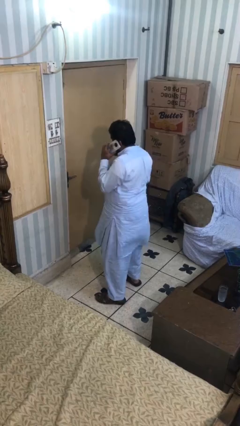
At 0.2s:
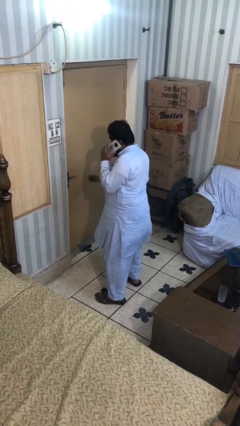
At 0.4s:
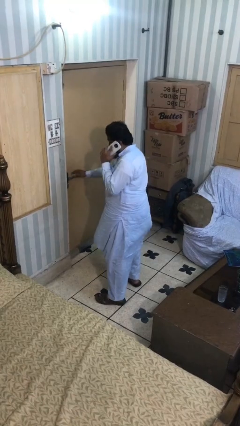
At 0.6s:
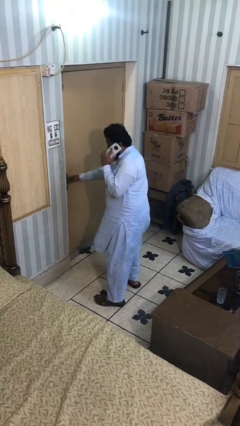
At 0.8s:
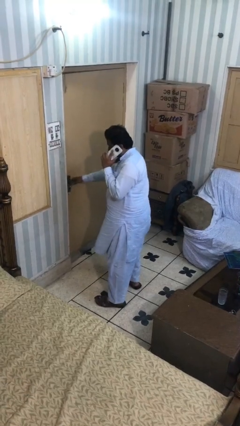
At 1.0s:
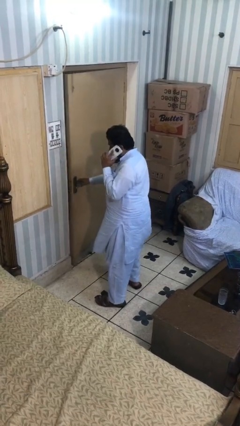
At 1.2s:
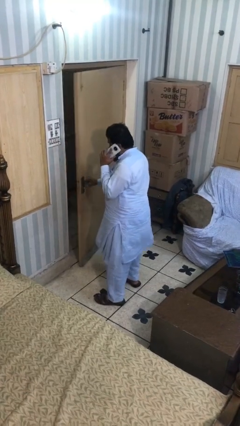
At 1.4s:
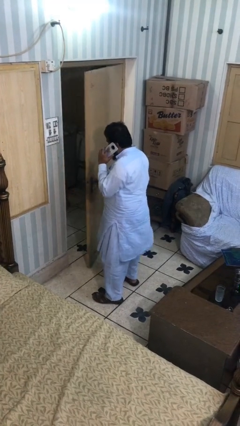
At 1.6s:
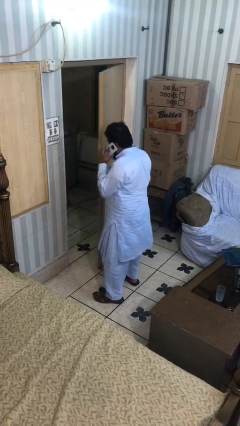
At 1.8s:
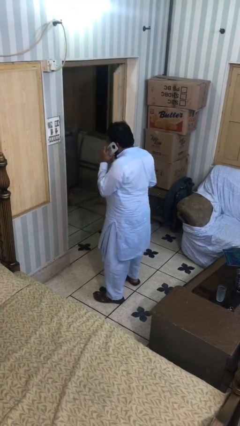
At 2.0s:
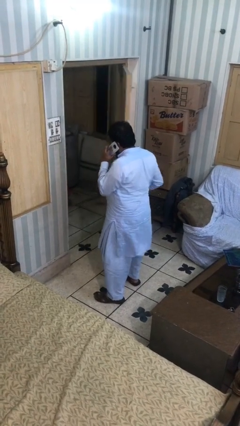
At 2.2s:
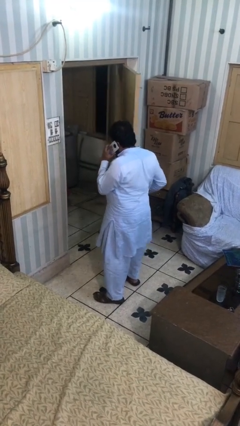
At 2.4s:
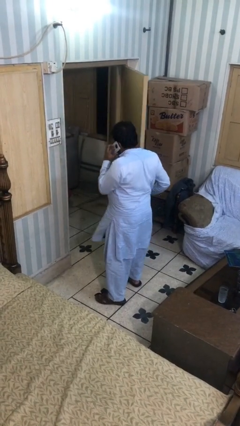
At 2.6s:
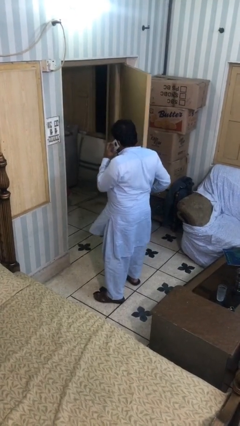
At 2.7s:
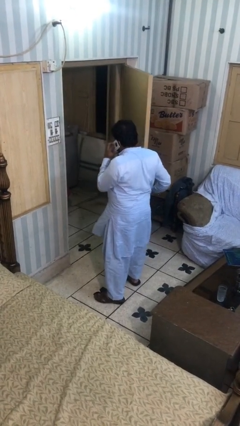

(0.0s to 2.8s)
person opens facility door

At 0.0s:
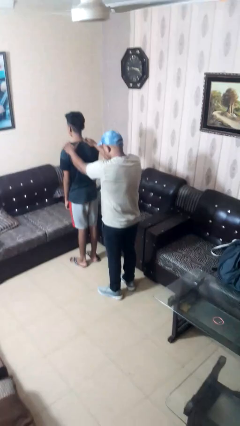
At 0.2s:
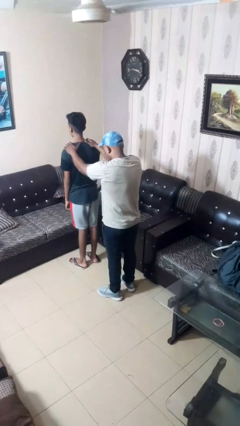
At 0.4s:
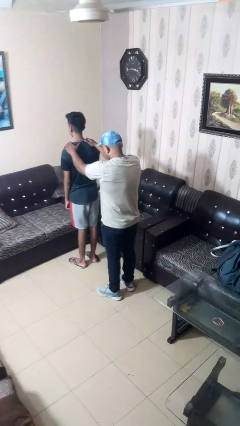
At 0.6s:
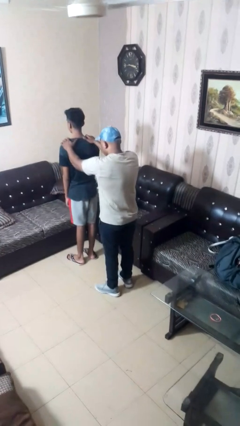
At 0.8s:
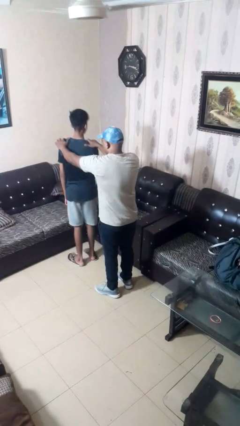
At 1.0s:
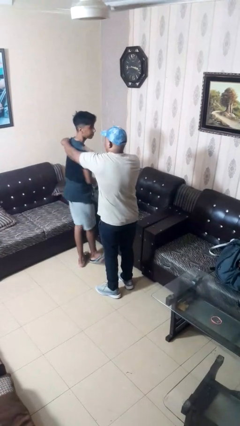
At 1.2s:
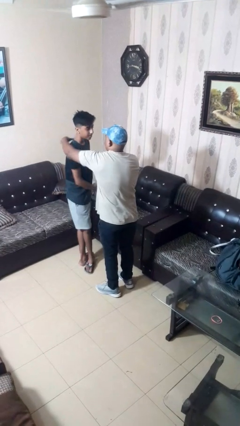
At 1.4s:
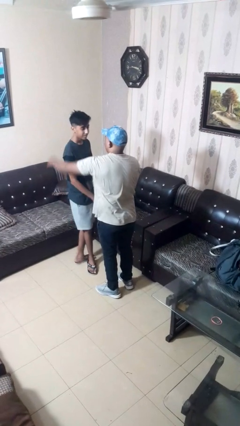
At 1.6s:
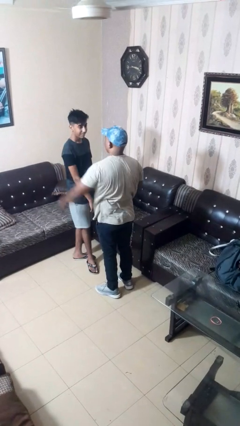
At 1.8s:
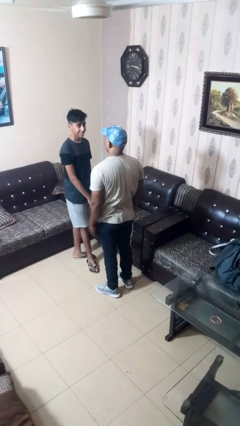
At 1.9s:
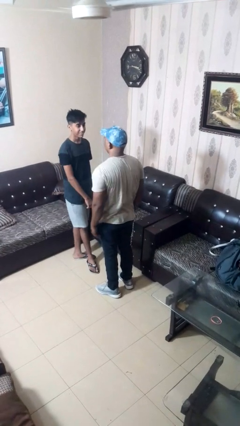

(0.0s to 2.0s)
person spins person around

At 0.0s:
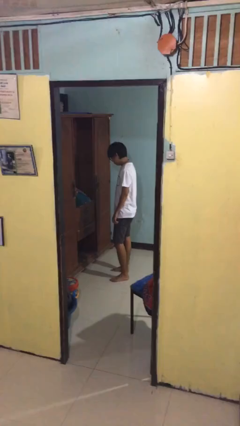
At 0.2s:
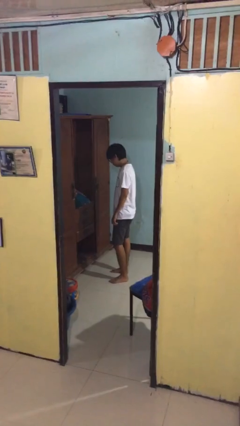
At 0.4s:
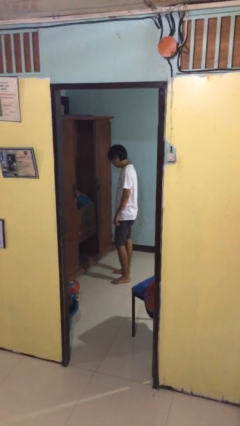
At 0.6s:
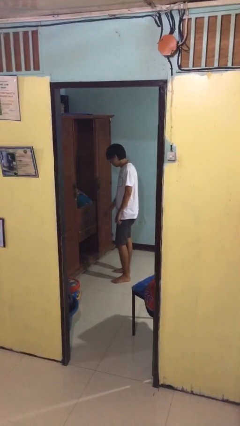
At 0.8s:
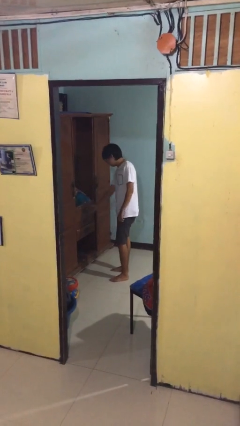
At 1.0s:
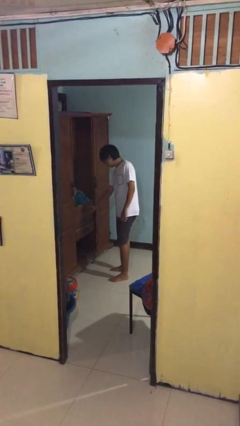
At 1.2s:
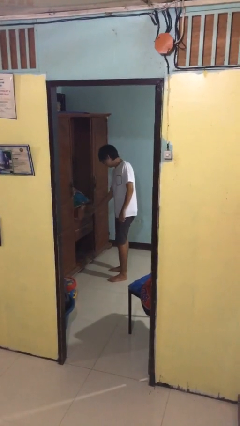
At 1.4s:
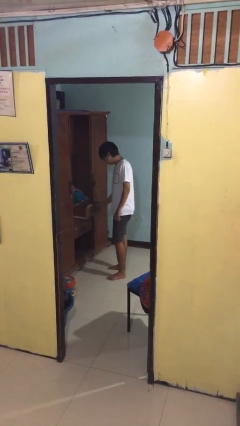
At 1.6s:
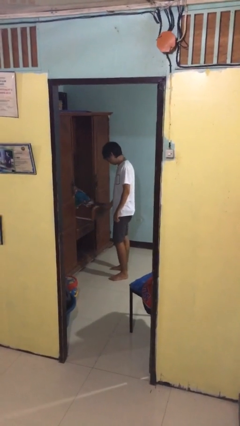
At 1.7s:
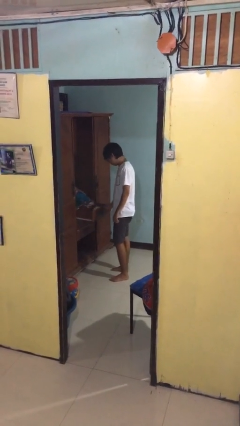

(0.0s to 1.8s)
person opens dresser drawer

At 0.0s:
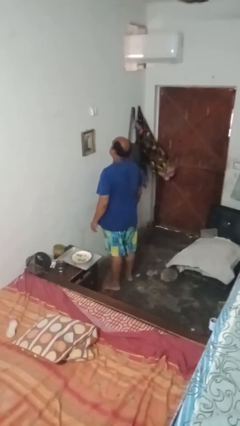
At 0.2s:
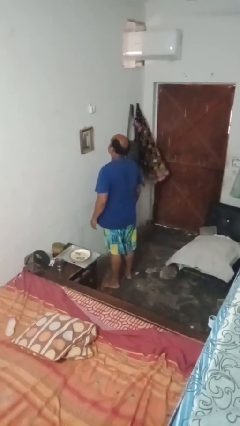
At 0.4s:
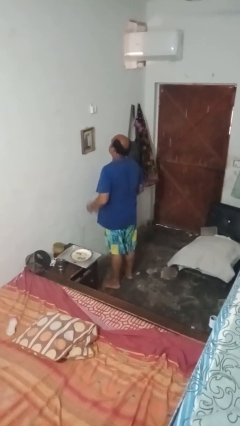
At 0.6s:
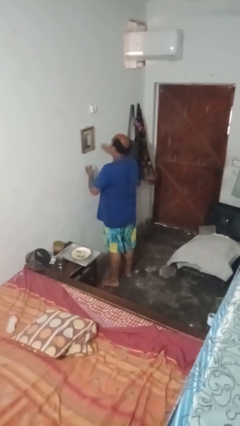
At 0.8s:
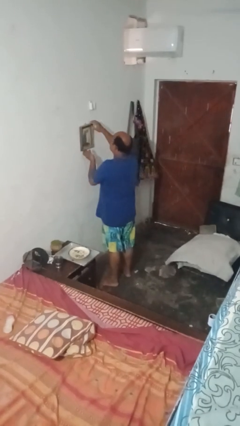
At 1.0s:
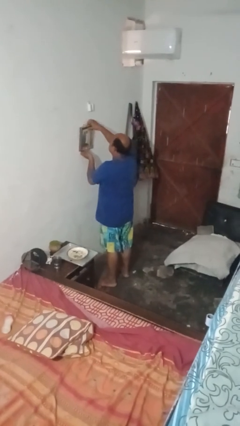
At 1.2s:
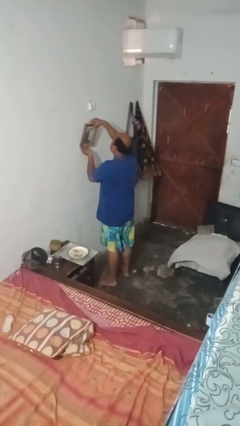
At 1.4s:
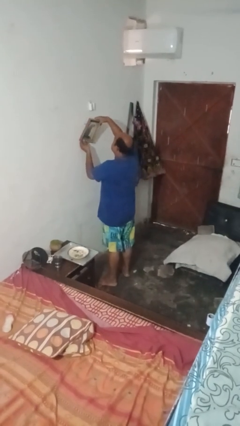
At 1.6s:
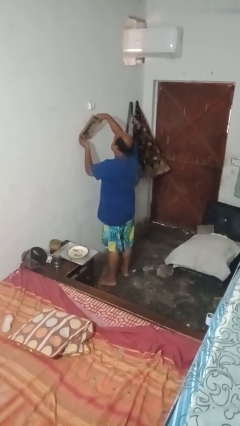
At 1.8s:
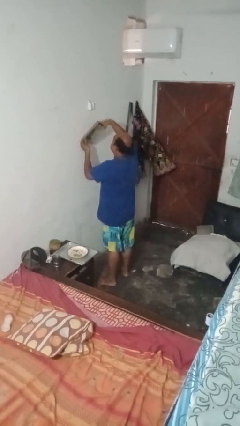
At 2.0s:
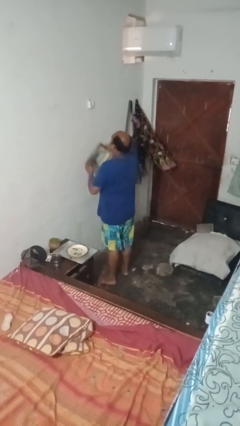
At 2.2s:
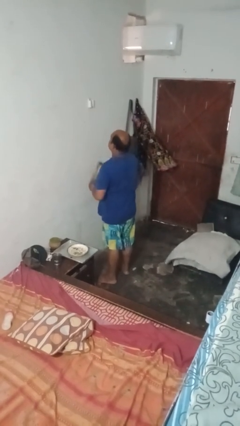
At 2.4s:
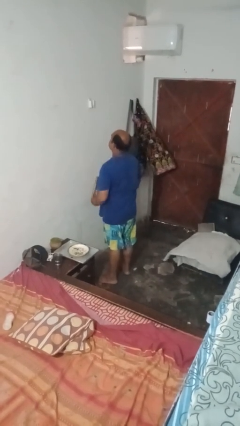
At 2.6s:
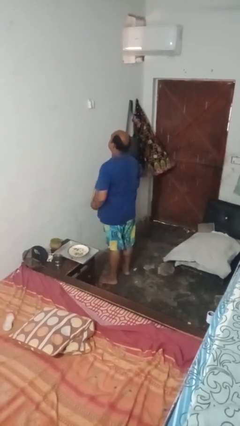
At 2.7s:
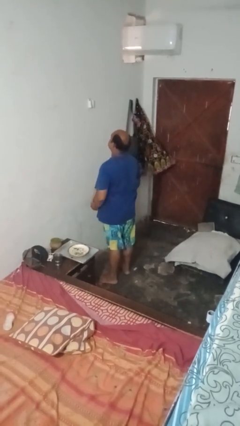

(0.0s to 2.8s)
person takes down picture frame

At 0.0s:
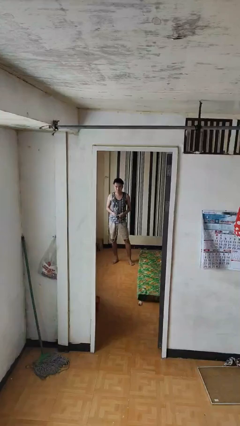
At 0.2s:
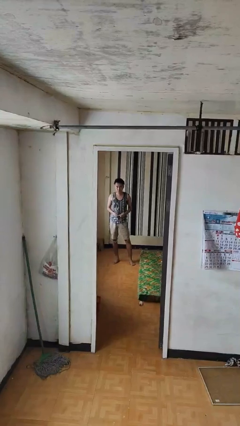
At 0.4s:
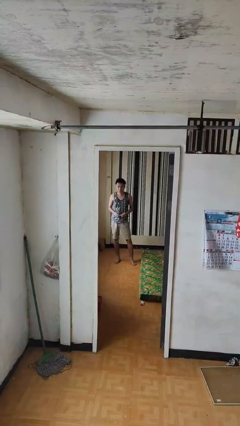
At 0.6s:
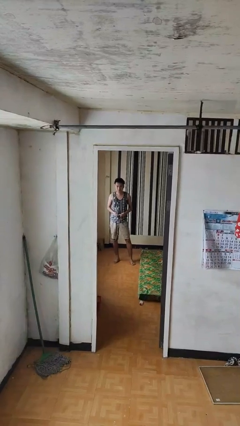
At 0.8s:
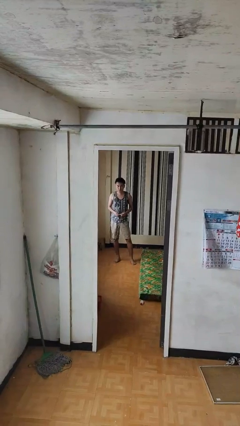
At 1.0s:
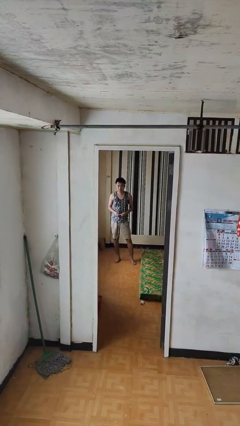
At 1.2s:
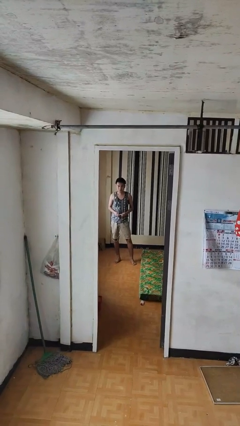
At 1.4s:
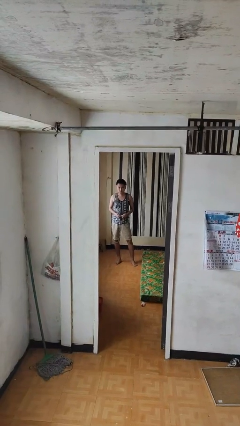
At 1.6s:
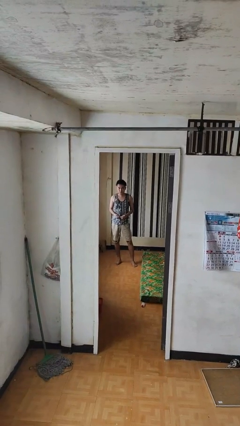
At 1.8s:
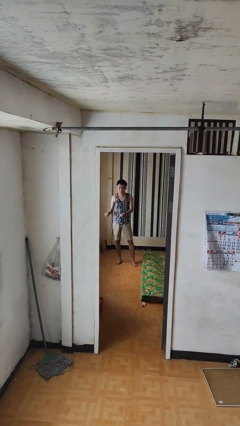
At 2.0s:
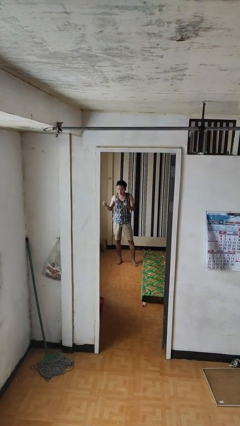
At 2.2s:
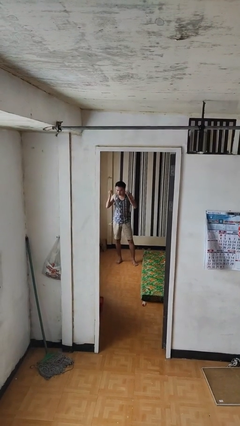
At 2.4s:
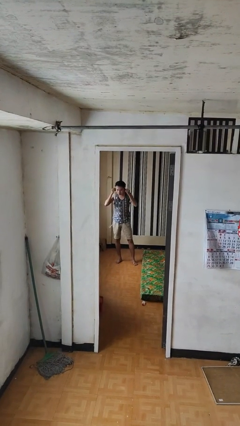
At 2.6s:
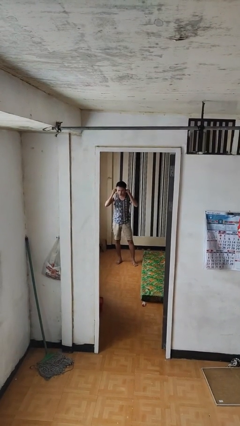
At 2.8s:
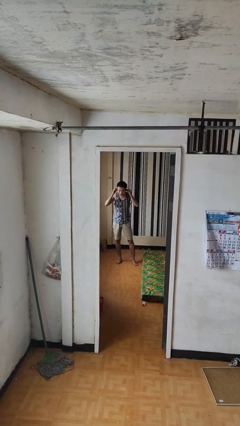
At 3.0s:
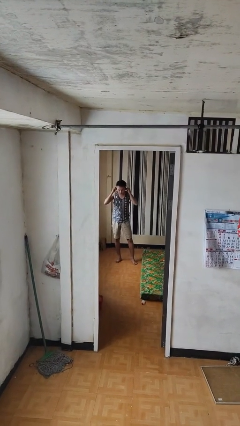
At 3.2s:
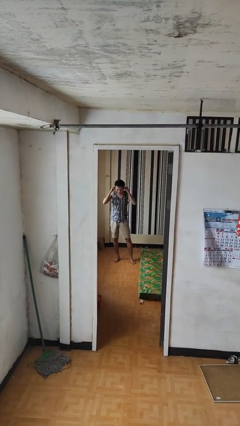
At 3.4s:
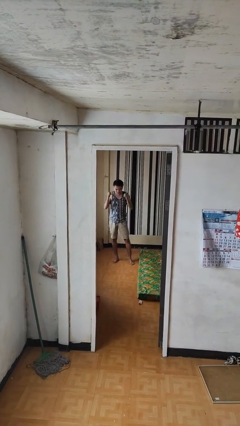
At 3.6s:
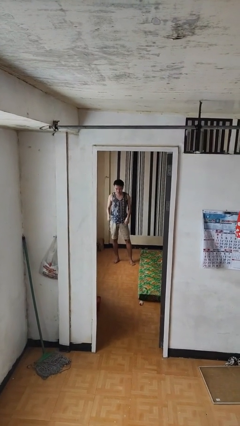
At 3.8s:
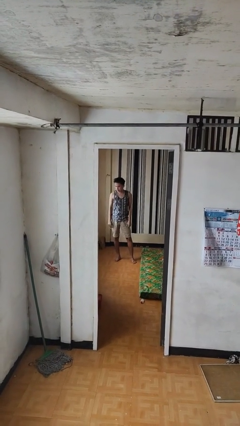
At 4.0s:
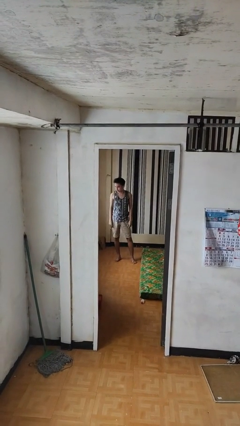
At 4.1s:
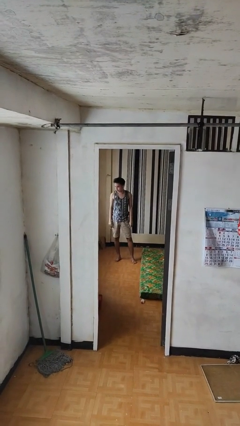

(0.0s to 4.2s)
person puts on headphones

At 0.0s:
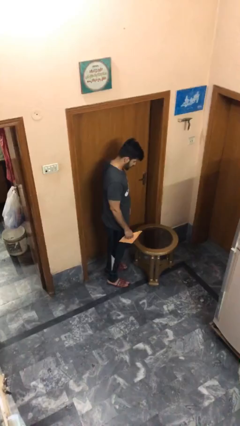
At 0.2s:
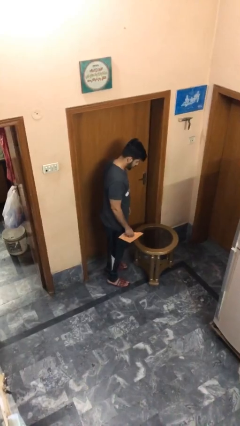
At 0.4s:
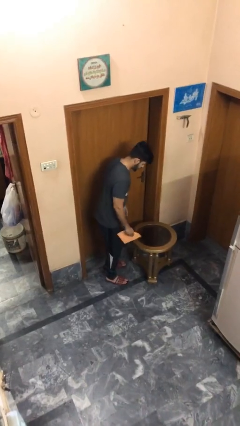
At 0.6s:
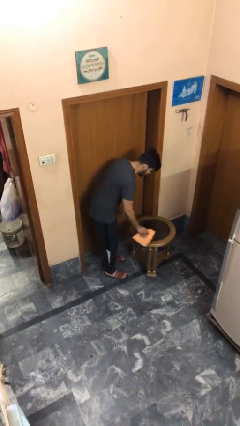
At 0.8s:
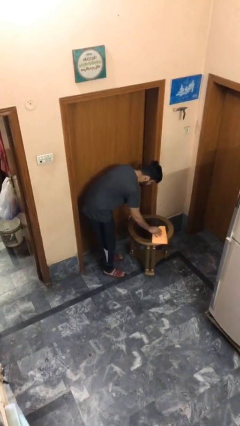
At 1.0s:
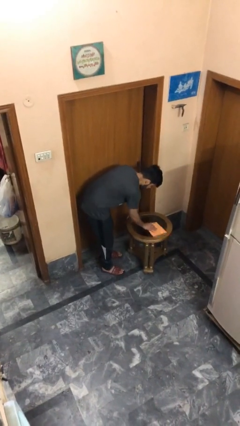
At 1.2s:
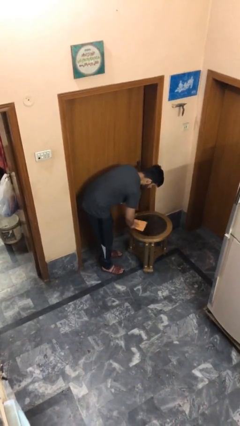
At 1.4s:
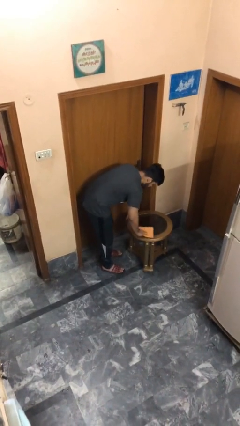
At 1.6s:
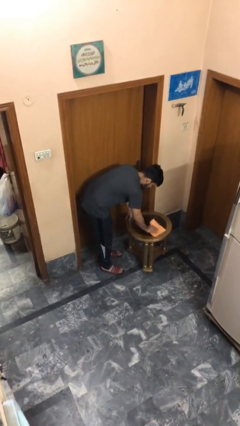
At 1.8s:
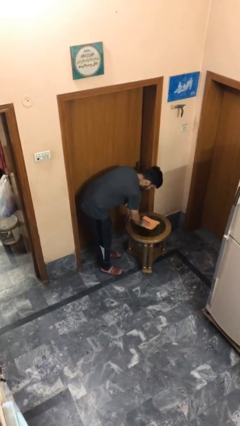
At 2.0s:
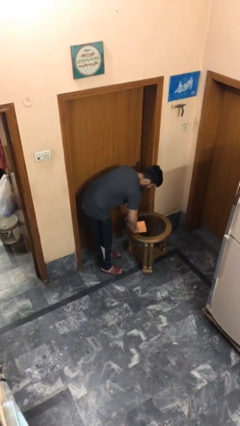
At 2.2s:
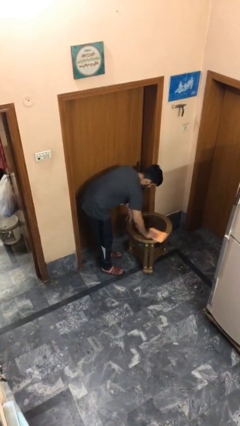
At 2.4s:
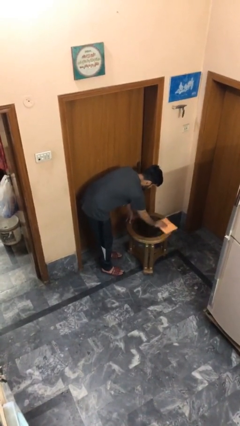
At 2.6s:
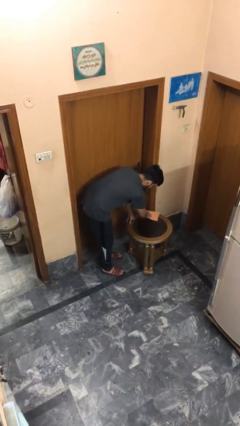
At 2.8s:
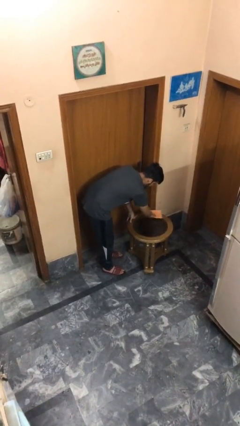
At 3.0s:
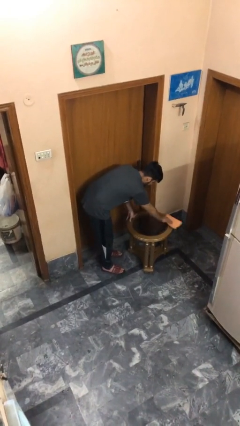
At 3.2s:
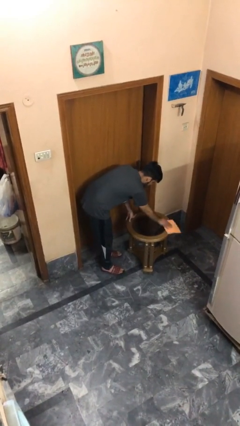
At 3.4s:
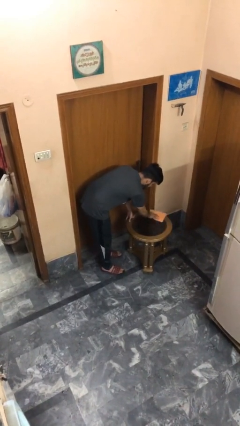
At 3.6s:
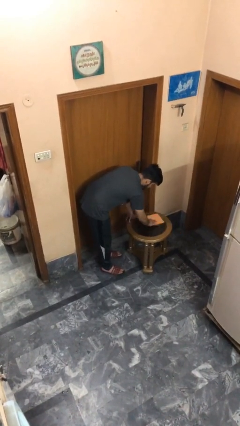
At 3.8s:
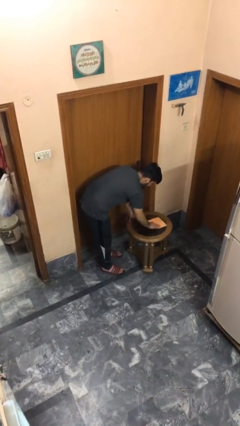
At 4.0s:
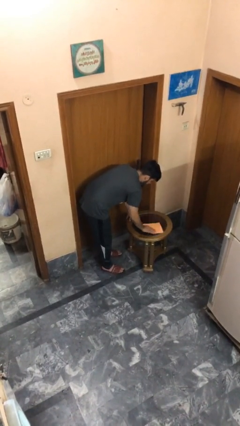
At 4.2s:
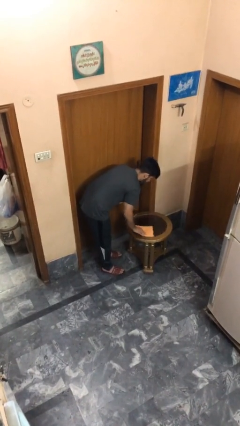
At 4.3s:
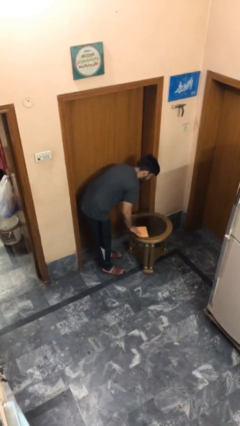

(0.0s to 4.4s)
person cleans table with rag
